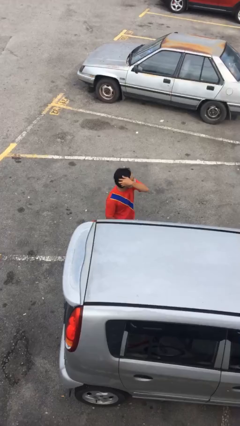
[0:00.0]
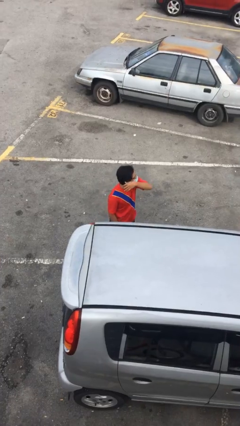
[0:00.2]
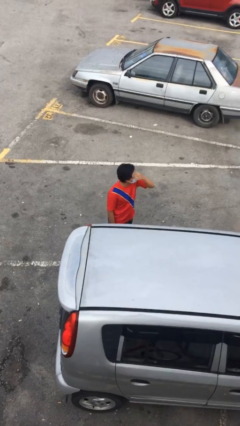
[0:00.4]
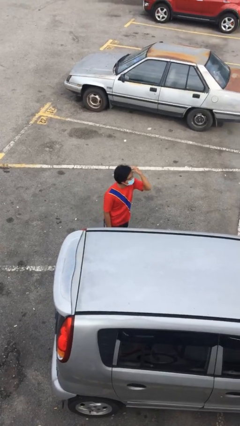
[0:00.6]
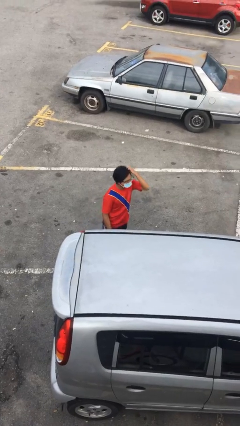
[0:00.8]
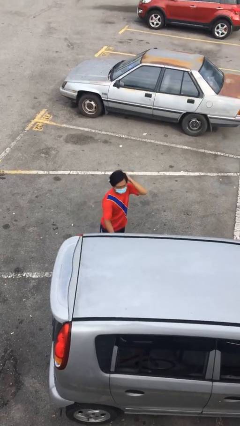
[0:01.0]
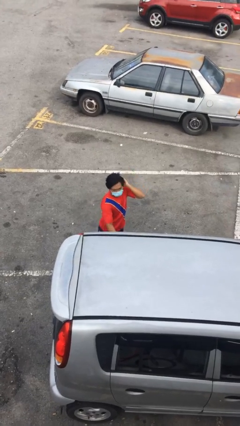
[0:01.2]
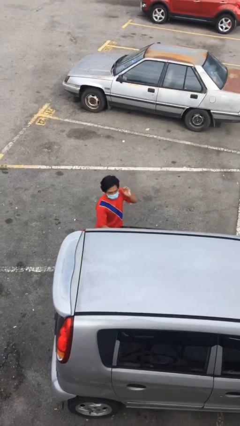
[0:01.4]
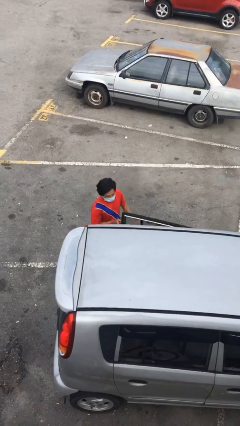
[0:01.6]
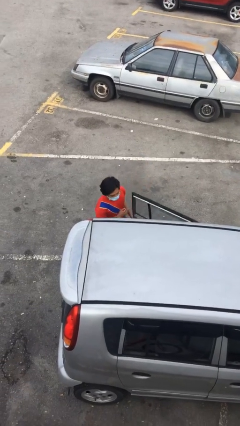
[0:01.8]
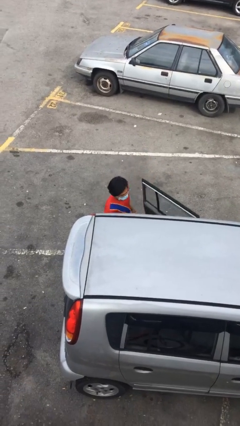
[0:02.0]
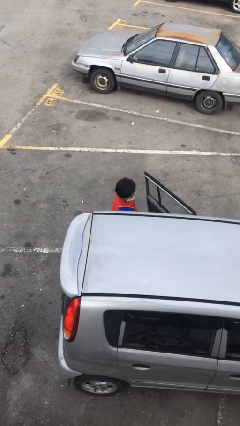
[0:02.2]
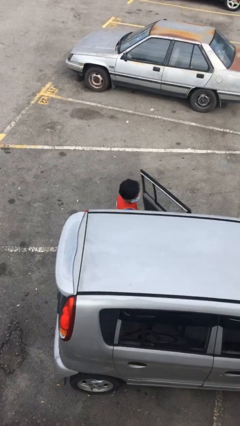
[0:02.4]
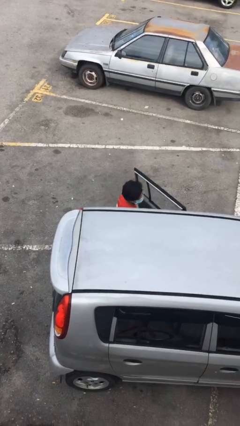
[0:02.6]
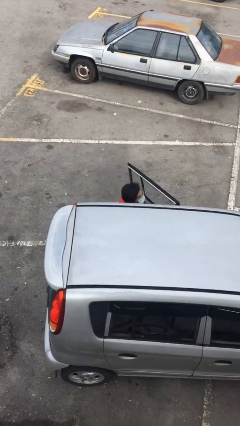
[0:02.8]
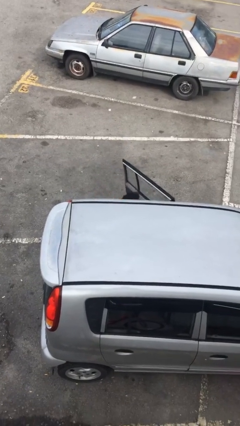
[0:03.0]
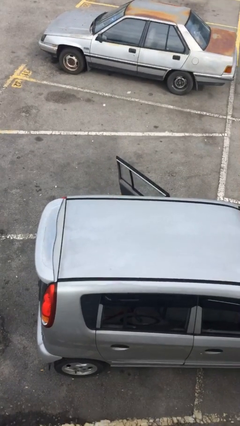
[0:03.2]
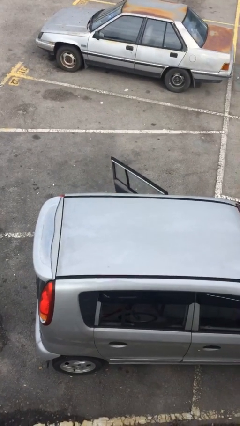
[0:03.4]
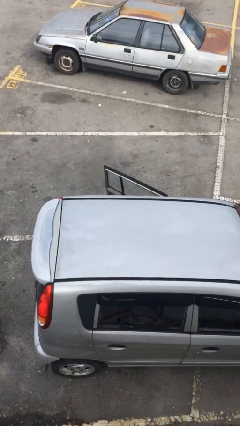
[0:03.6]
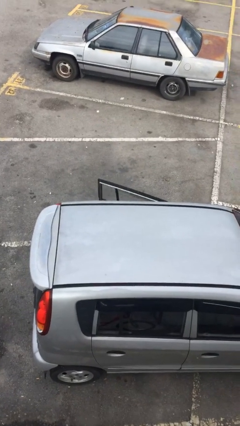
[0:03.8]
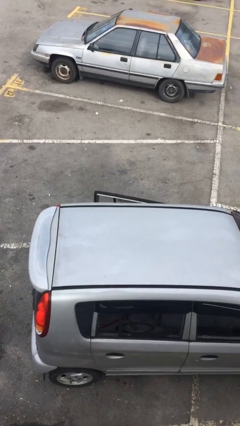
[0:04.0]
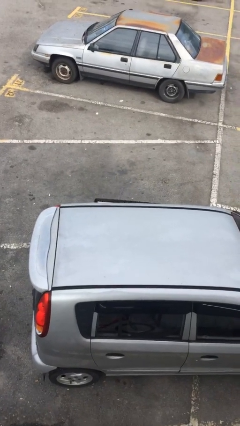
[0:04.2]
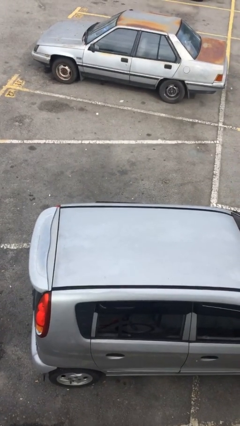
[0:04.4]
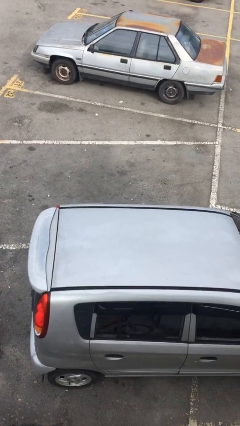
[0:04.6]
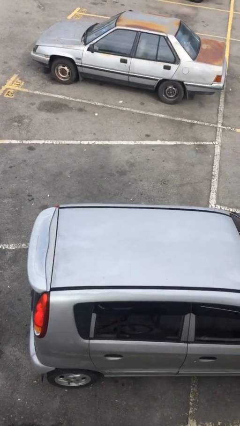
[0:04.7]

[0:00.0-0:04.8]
person enters car

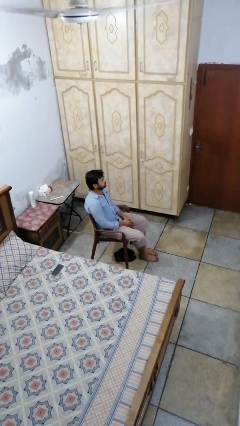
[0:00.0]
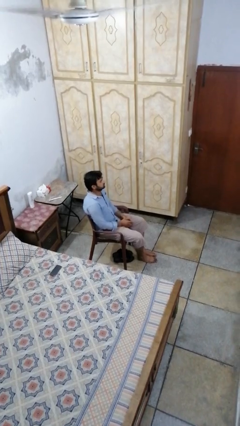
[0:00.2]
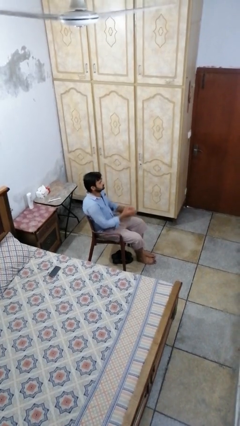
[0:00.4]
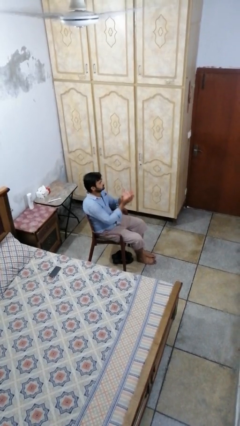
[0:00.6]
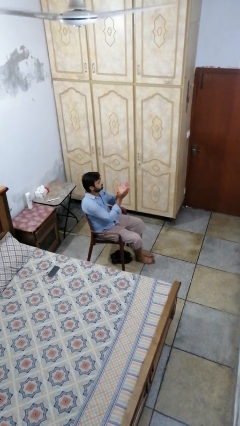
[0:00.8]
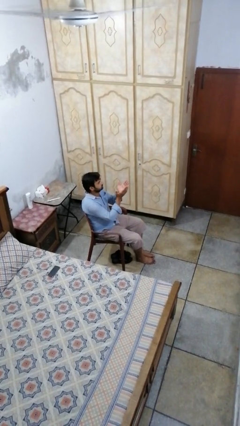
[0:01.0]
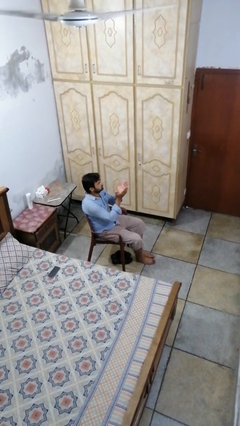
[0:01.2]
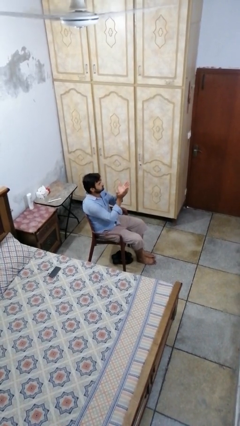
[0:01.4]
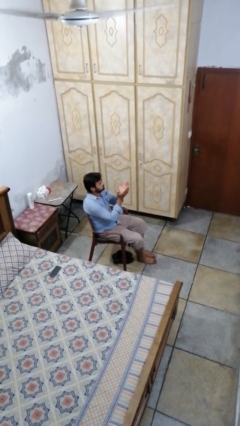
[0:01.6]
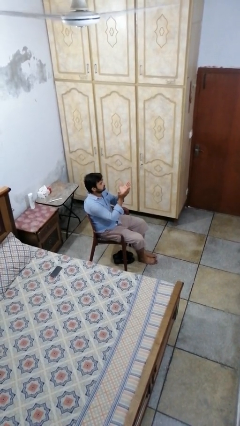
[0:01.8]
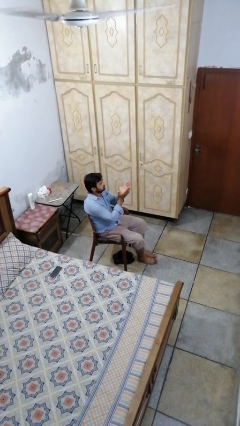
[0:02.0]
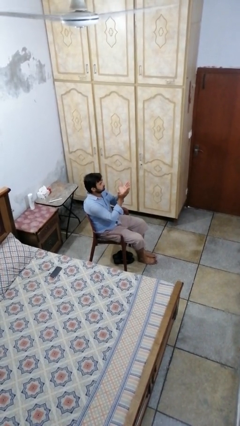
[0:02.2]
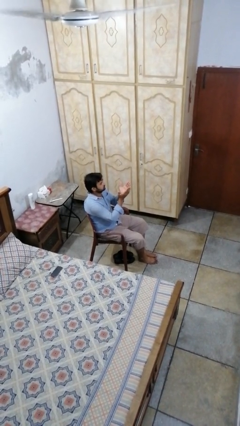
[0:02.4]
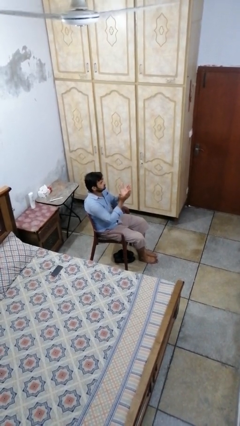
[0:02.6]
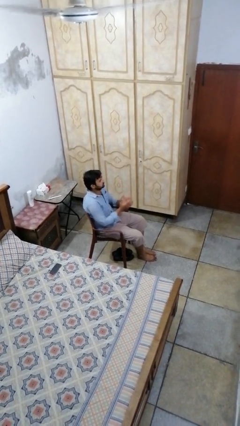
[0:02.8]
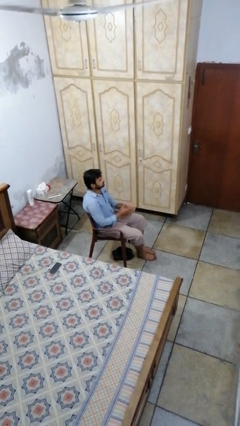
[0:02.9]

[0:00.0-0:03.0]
person prays

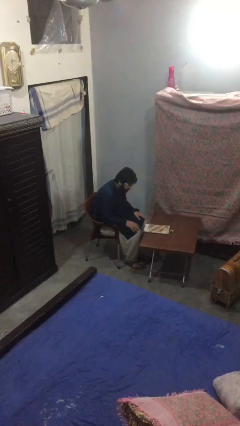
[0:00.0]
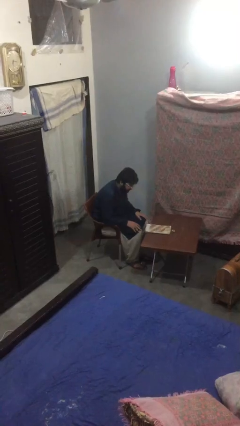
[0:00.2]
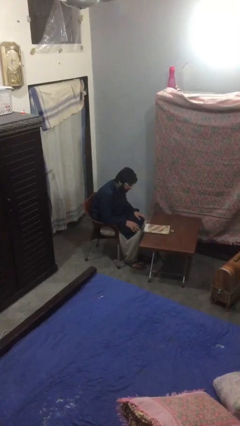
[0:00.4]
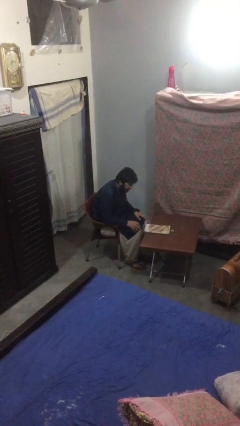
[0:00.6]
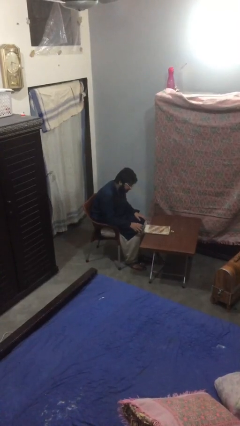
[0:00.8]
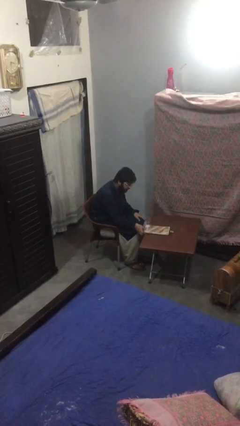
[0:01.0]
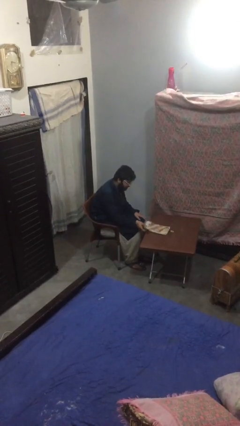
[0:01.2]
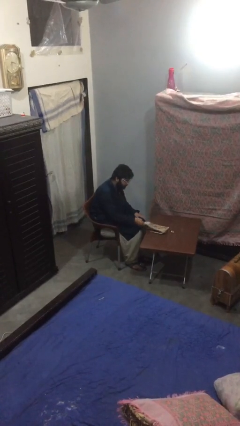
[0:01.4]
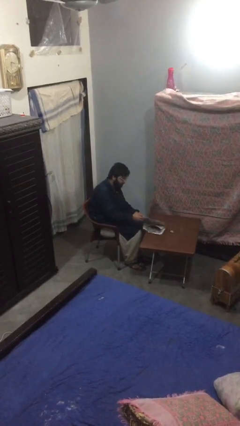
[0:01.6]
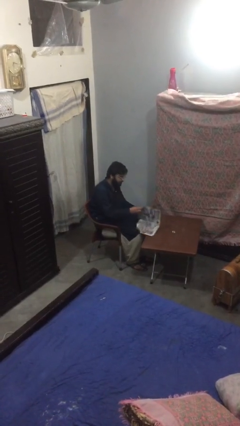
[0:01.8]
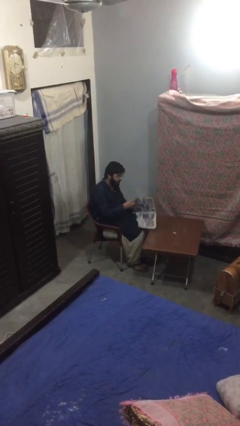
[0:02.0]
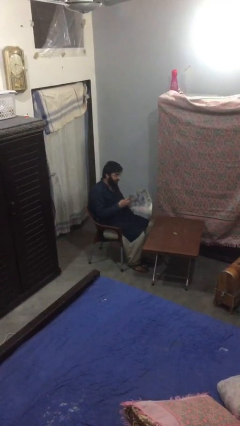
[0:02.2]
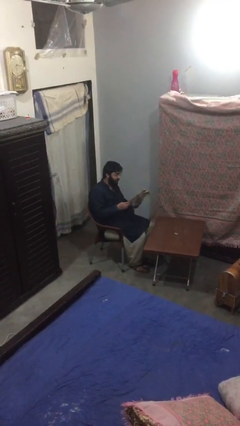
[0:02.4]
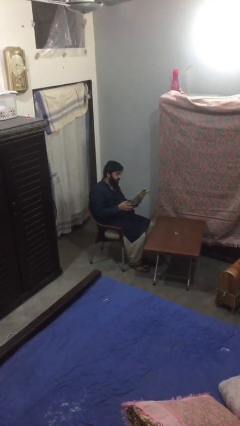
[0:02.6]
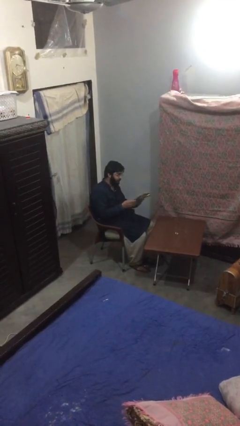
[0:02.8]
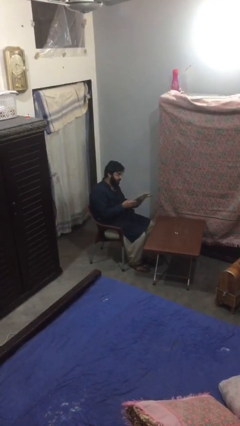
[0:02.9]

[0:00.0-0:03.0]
person picks up object from table

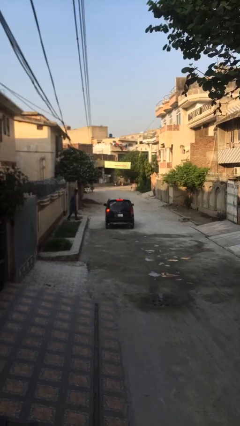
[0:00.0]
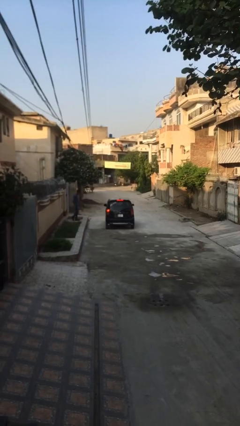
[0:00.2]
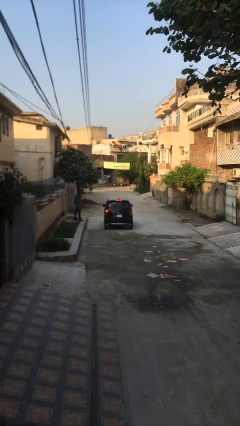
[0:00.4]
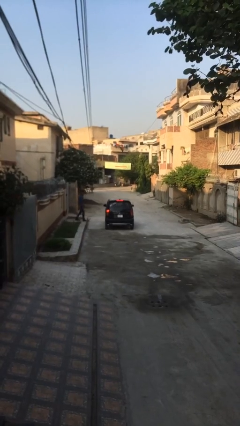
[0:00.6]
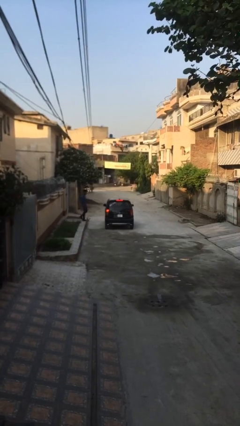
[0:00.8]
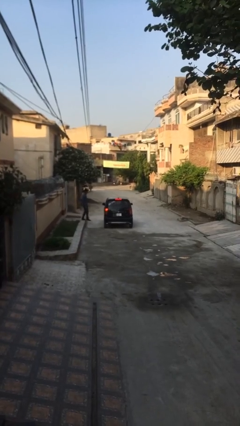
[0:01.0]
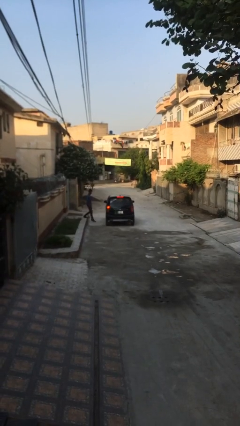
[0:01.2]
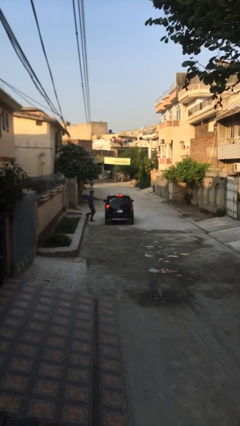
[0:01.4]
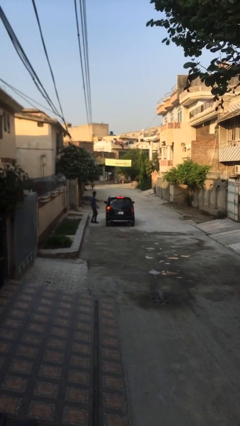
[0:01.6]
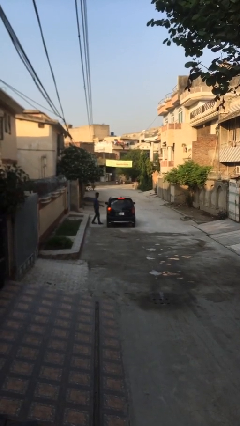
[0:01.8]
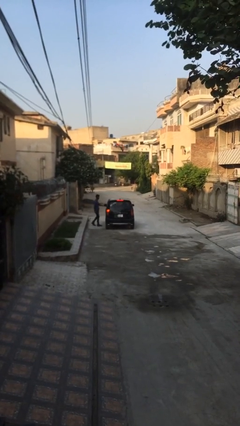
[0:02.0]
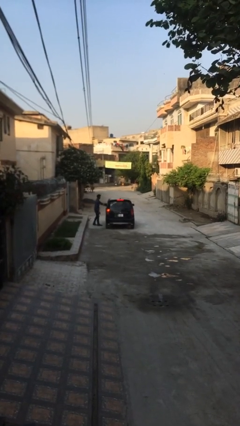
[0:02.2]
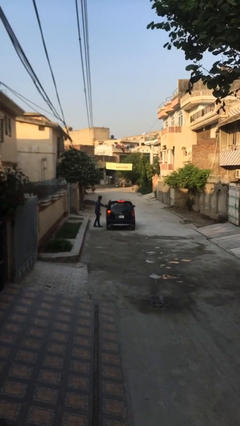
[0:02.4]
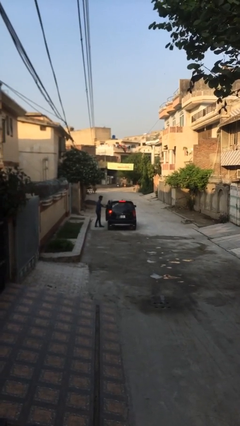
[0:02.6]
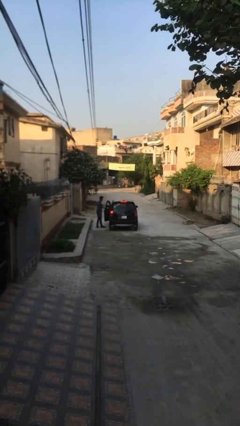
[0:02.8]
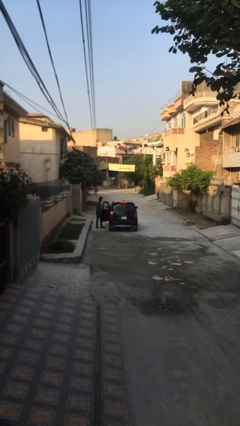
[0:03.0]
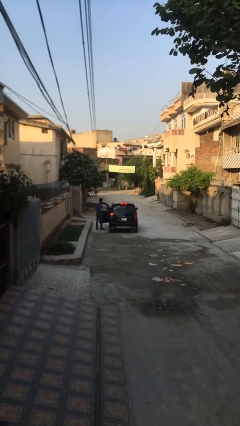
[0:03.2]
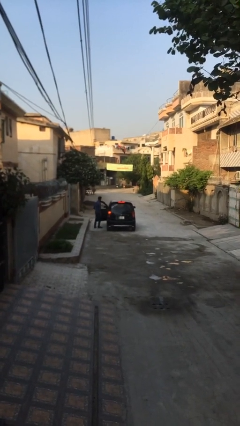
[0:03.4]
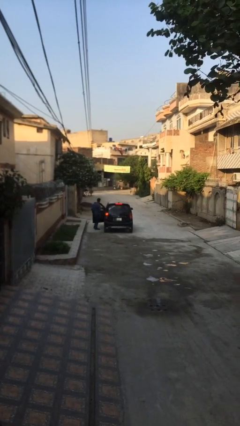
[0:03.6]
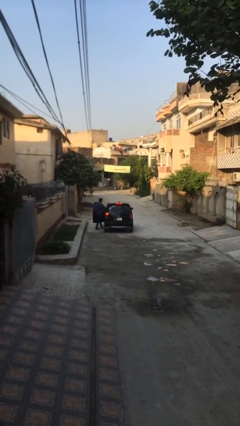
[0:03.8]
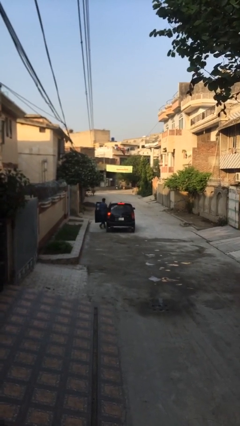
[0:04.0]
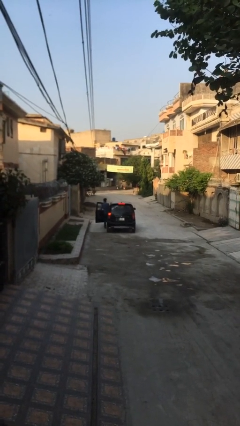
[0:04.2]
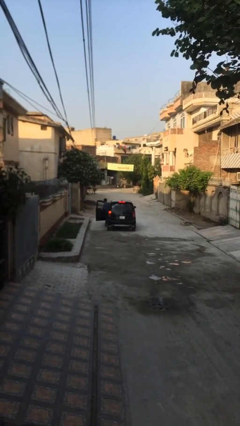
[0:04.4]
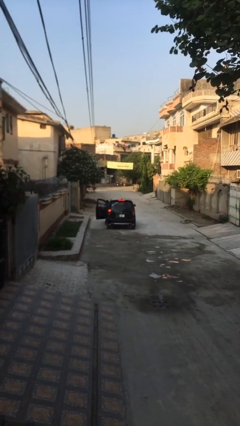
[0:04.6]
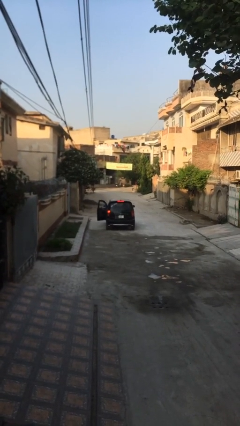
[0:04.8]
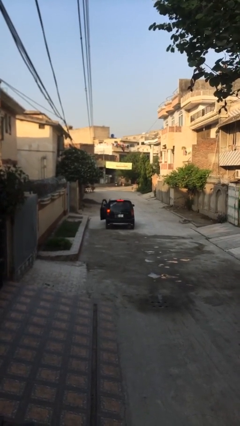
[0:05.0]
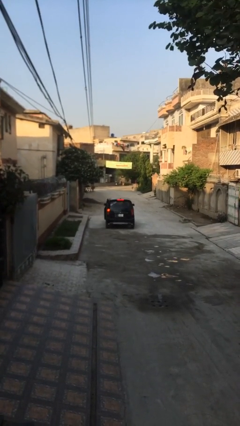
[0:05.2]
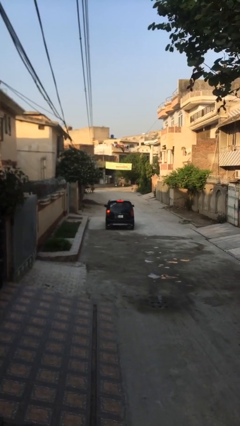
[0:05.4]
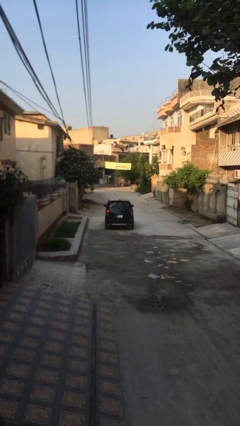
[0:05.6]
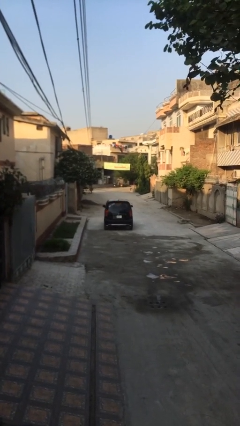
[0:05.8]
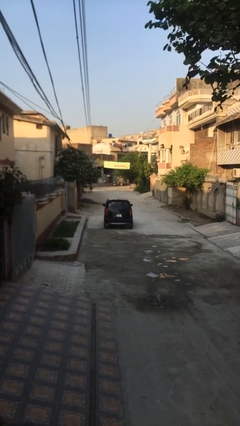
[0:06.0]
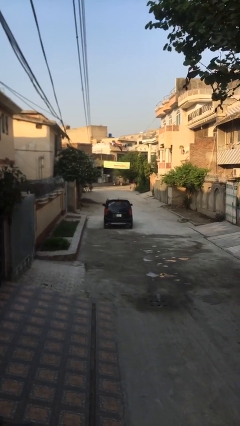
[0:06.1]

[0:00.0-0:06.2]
car picks up person

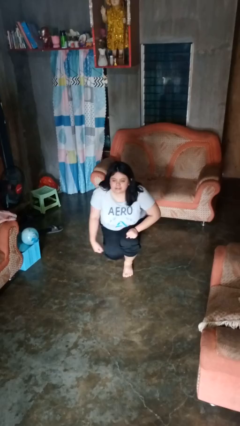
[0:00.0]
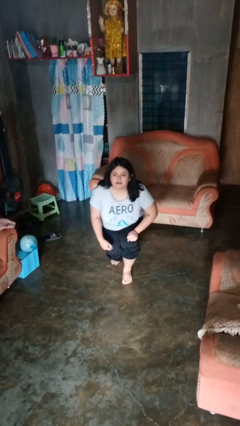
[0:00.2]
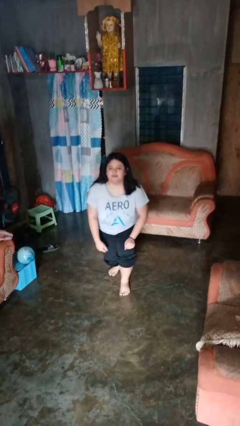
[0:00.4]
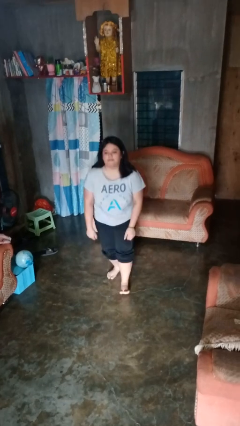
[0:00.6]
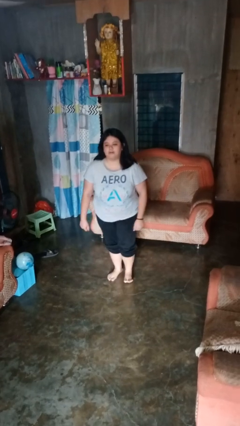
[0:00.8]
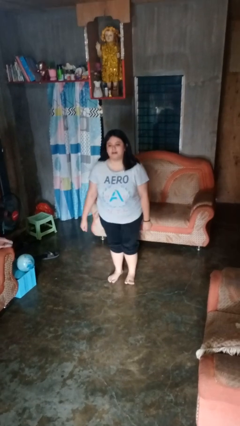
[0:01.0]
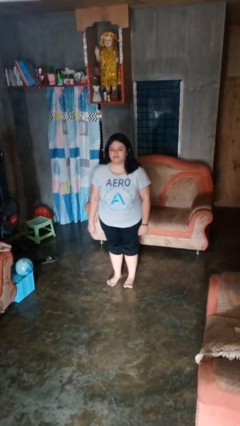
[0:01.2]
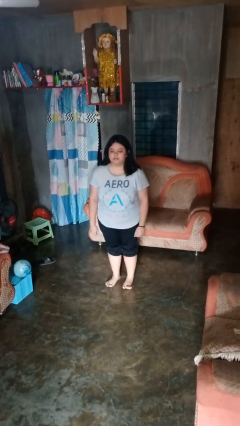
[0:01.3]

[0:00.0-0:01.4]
person stands up from floor
